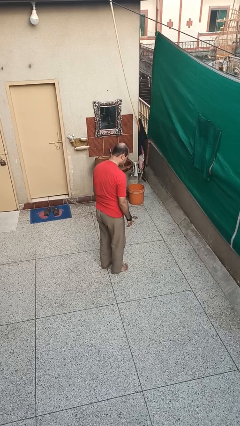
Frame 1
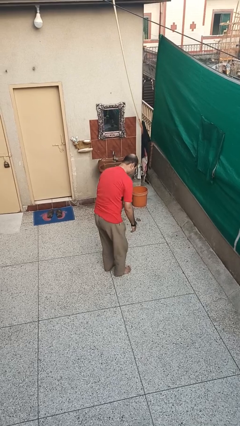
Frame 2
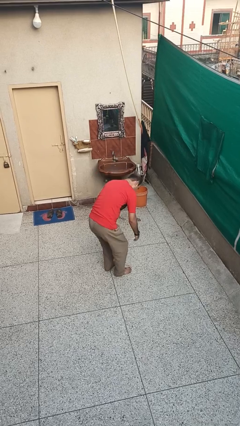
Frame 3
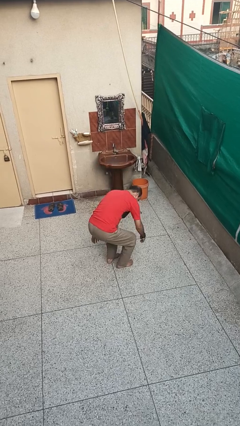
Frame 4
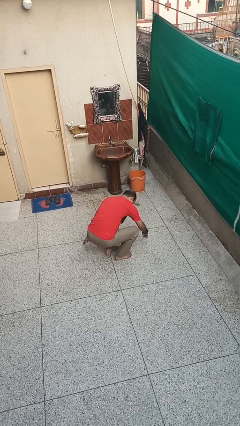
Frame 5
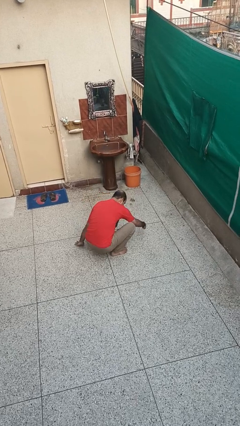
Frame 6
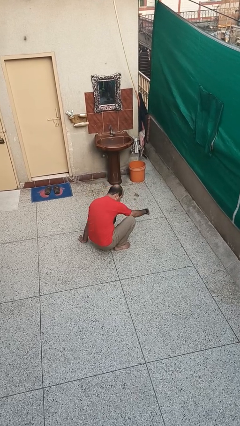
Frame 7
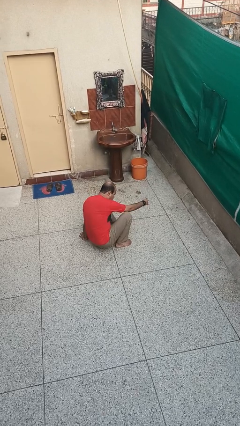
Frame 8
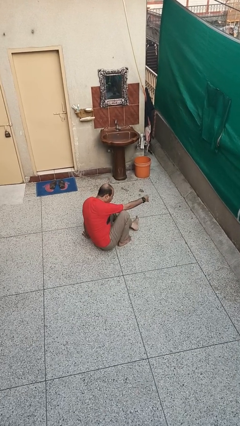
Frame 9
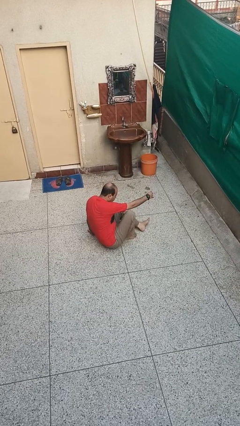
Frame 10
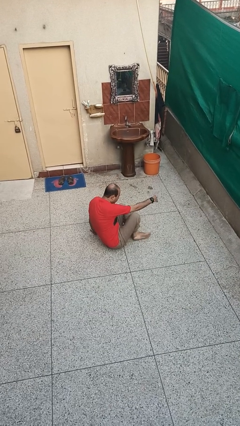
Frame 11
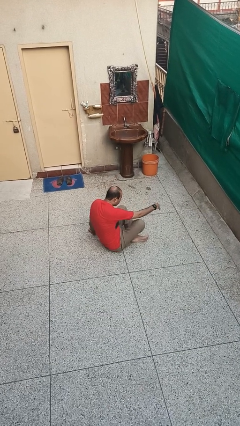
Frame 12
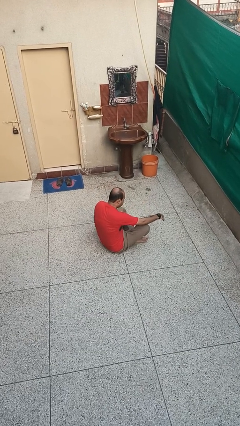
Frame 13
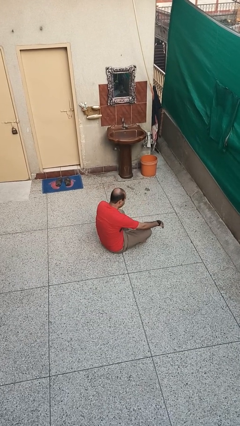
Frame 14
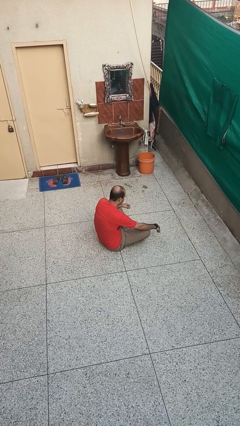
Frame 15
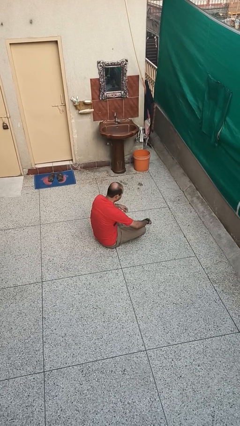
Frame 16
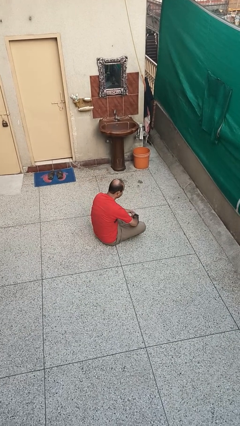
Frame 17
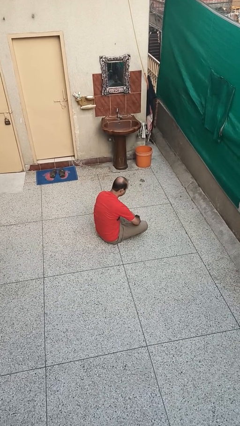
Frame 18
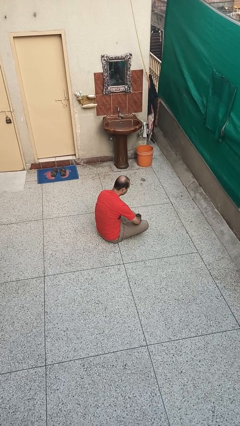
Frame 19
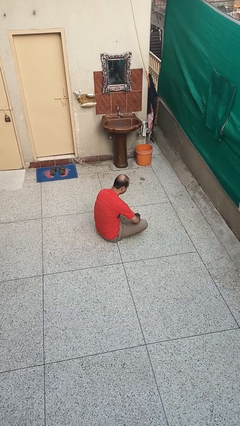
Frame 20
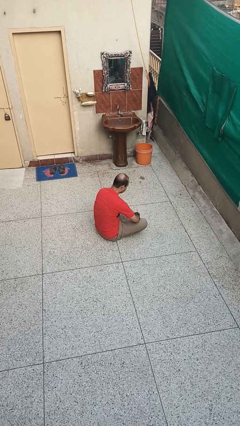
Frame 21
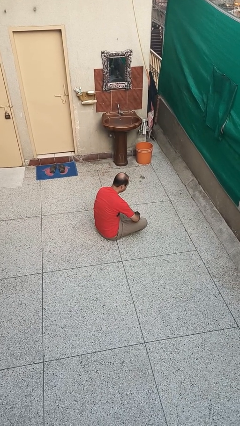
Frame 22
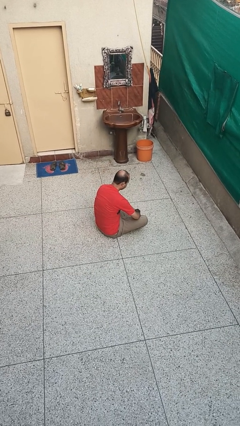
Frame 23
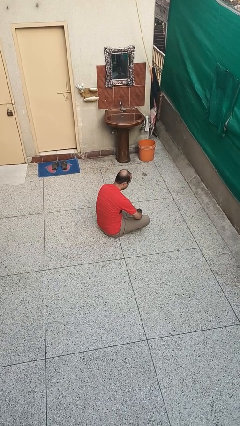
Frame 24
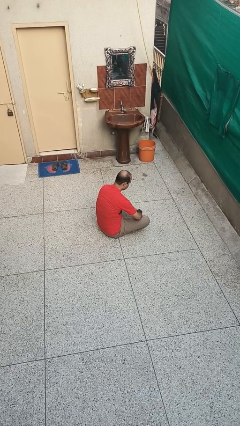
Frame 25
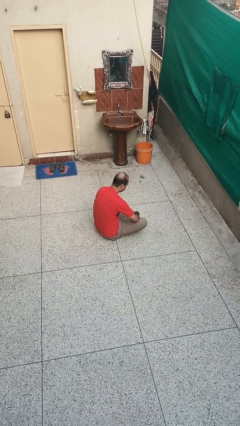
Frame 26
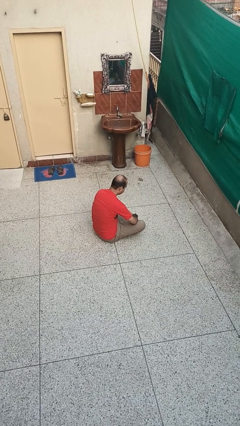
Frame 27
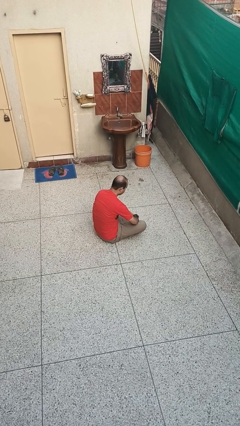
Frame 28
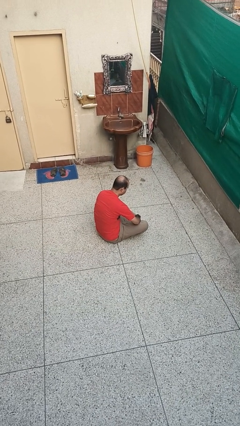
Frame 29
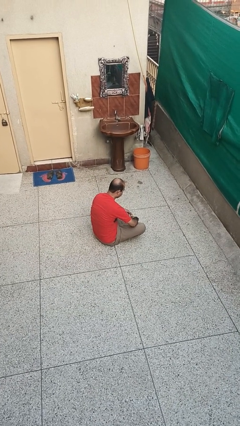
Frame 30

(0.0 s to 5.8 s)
person sits crisscross

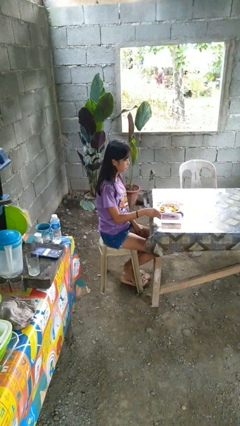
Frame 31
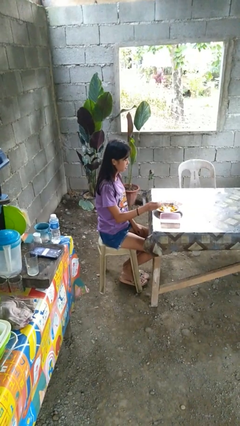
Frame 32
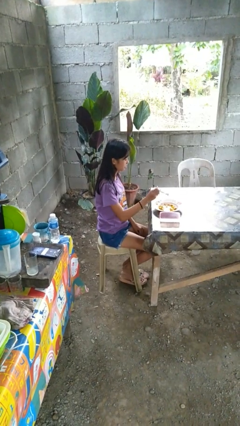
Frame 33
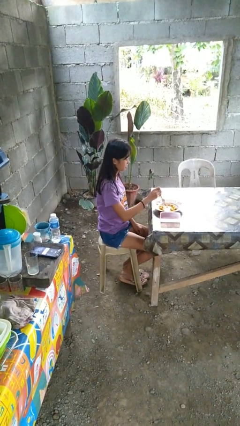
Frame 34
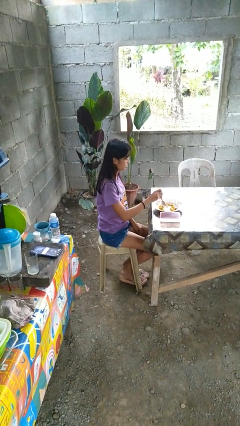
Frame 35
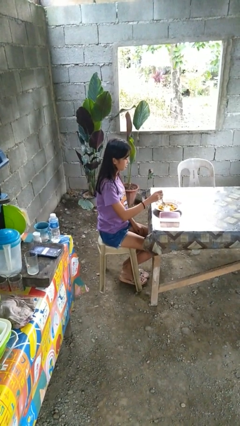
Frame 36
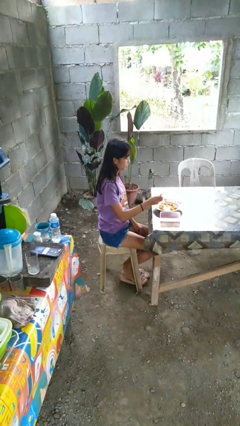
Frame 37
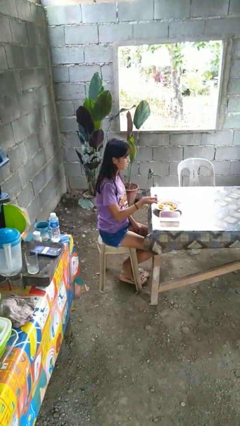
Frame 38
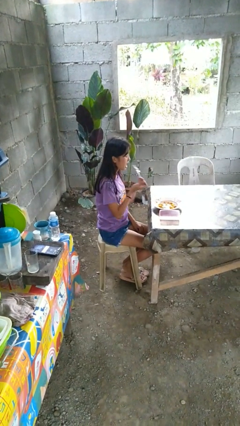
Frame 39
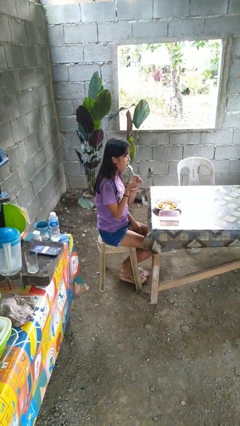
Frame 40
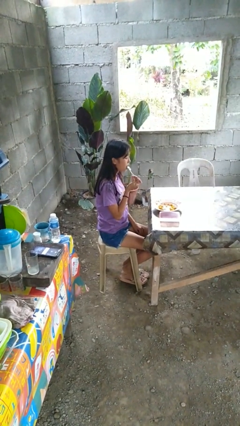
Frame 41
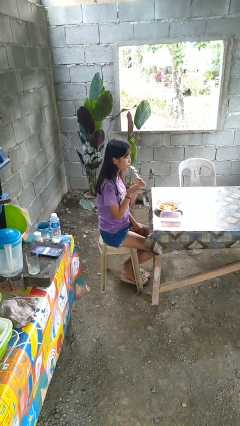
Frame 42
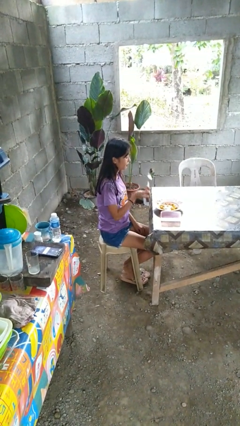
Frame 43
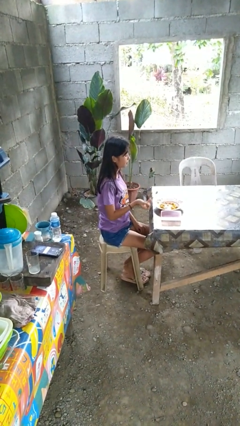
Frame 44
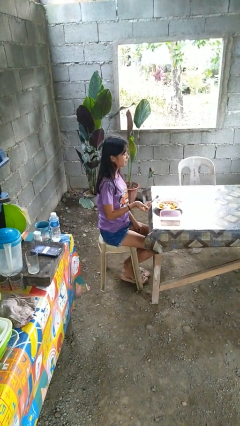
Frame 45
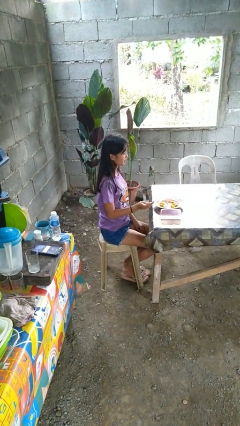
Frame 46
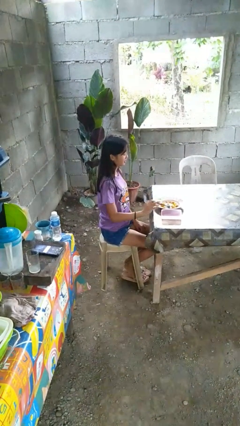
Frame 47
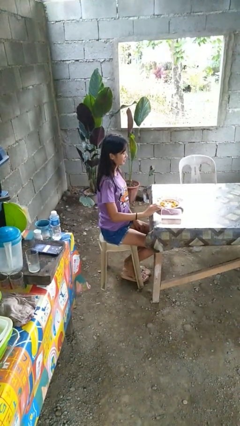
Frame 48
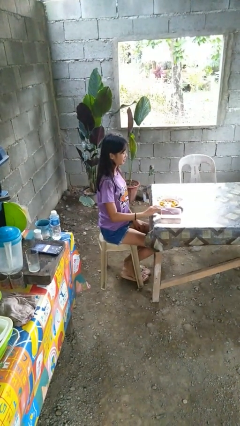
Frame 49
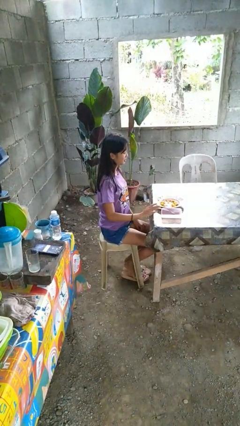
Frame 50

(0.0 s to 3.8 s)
person eats with utensil

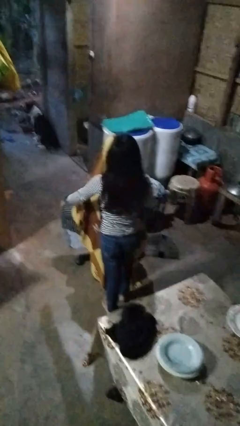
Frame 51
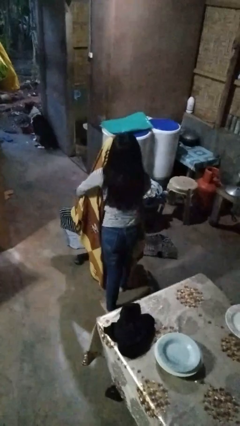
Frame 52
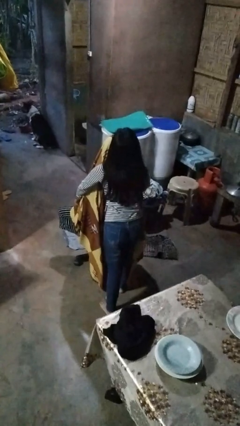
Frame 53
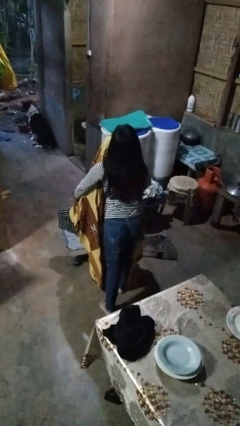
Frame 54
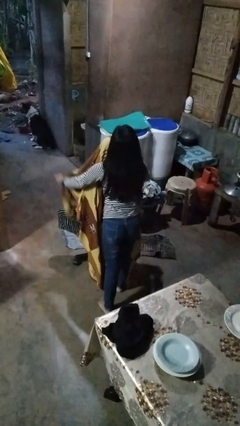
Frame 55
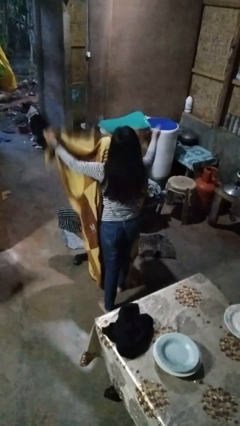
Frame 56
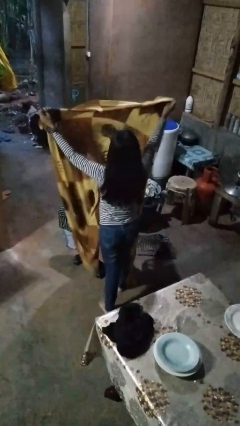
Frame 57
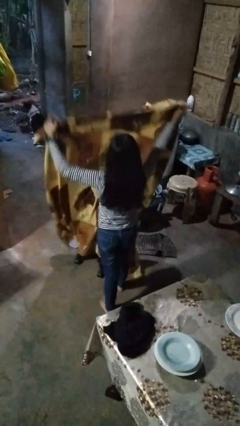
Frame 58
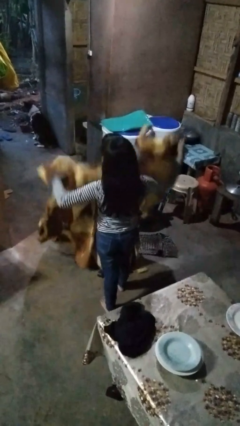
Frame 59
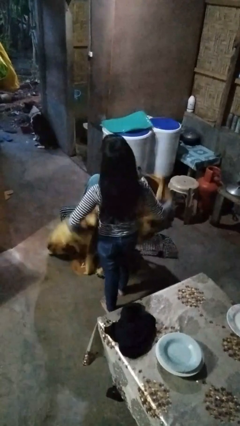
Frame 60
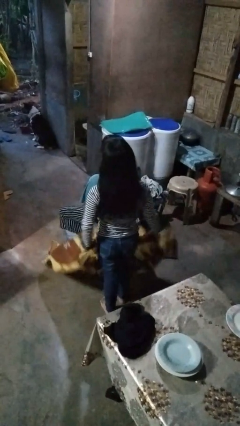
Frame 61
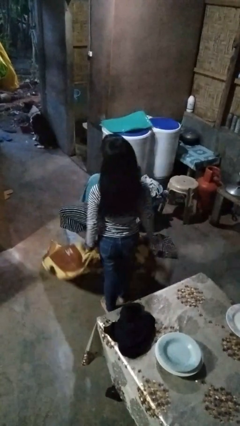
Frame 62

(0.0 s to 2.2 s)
person uncovers friend with blanket

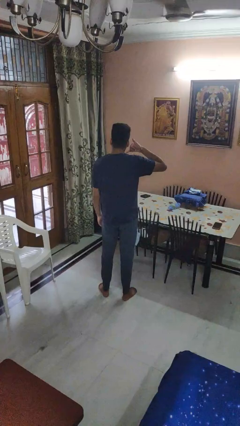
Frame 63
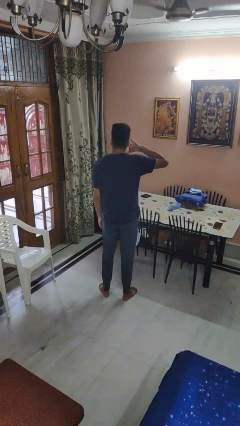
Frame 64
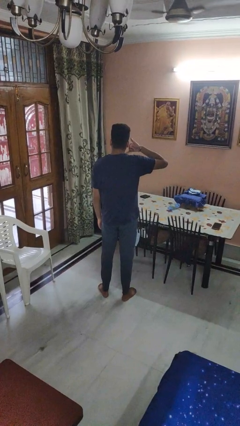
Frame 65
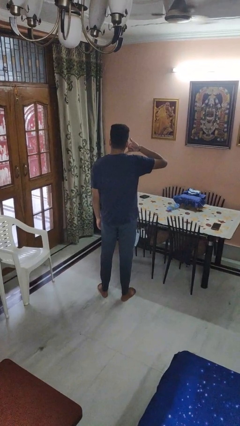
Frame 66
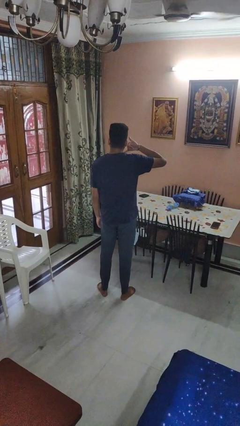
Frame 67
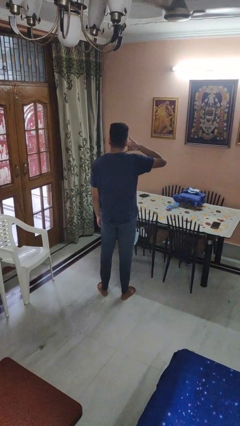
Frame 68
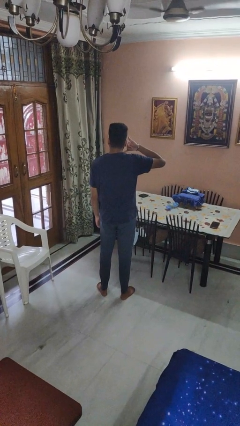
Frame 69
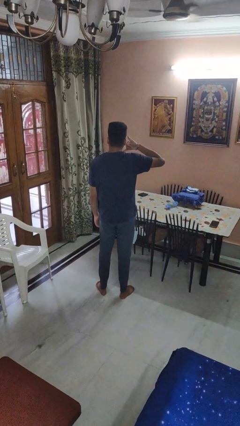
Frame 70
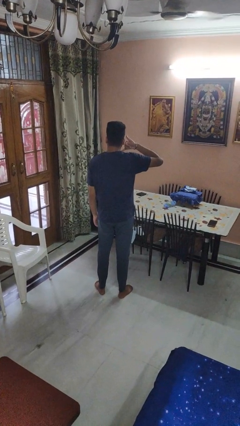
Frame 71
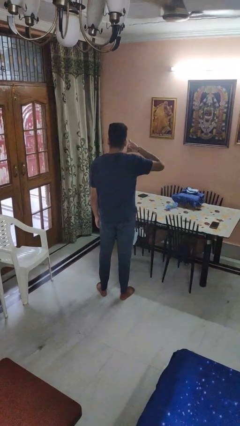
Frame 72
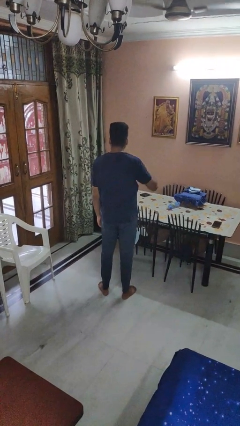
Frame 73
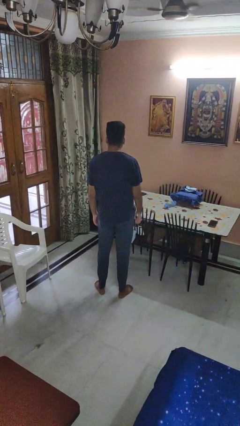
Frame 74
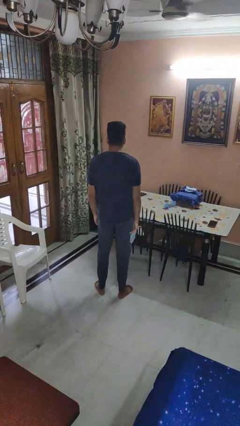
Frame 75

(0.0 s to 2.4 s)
person gestures call me

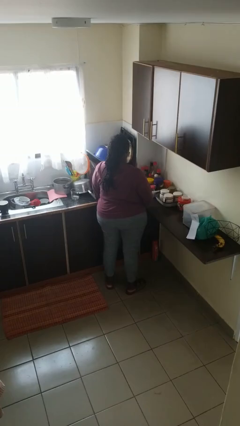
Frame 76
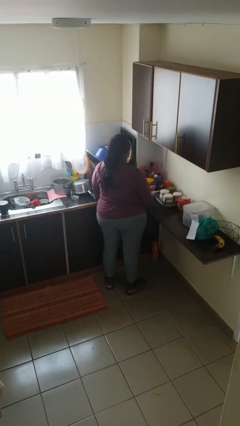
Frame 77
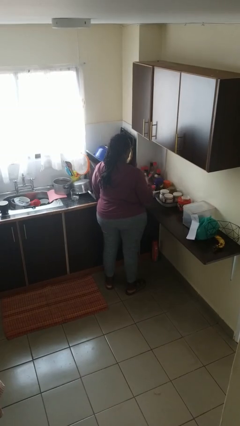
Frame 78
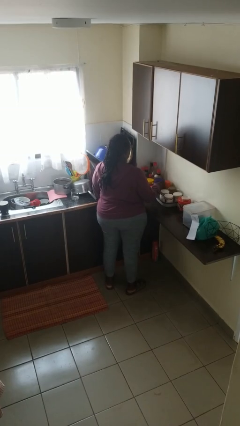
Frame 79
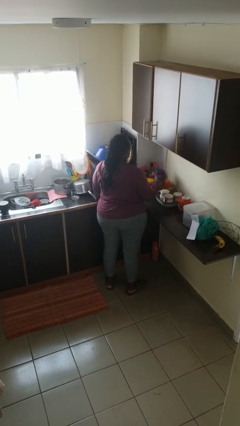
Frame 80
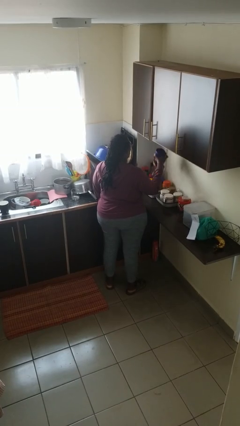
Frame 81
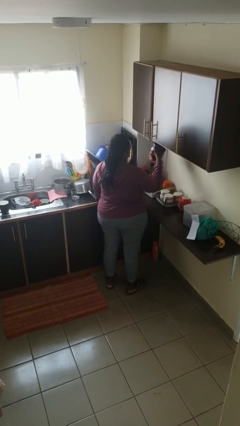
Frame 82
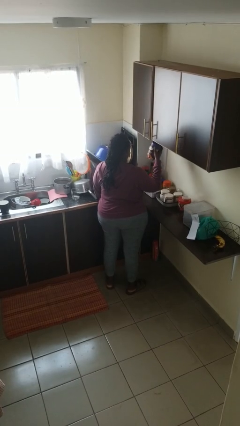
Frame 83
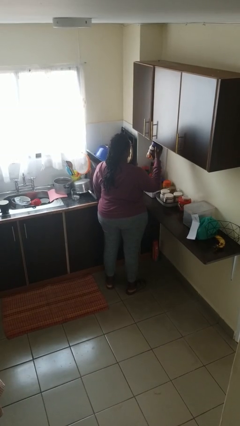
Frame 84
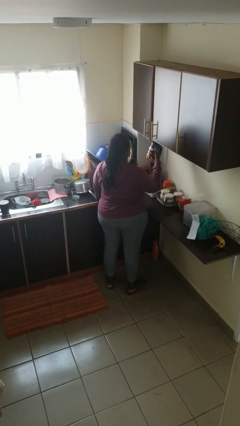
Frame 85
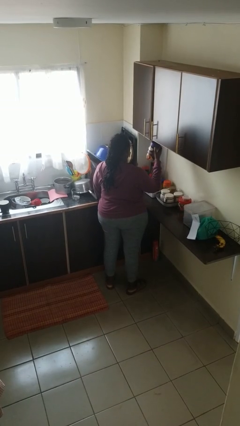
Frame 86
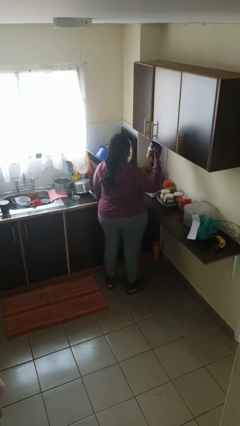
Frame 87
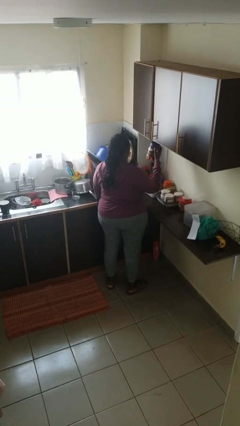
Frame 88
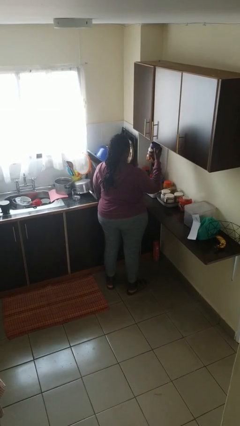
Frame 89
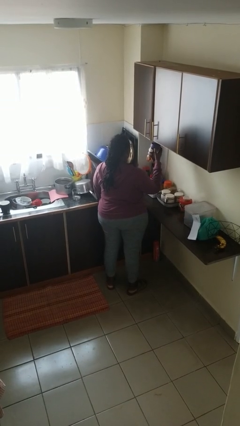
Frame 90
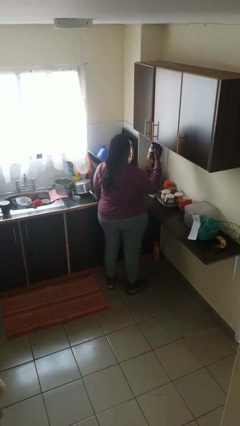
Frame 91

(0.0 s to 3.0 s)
person picks up object from countertop

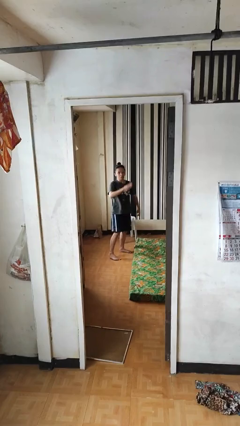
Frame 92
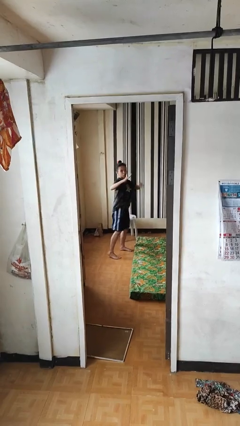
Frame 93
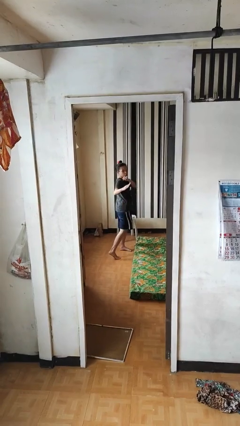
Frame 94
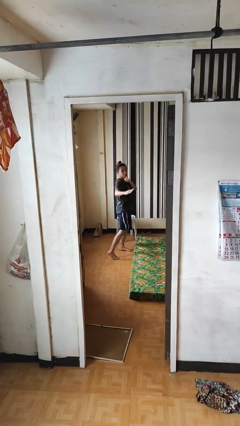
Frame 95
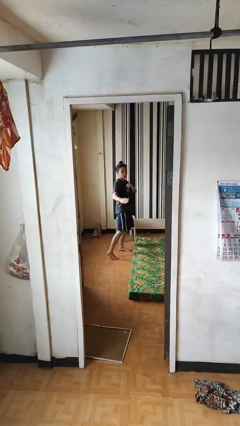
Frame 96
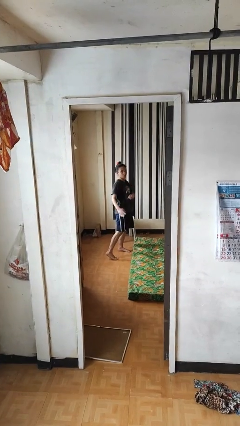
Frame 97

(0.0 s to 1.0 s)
person karate chop
